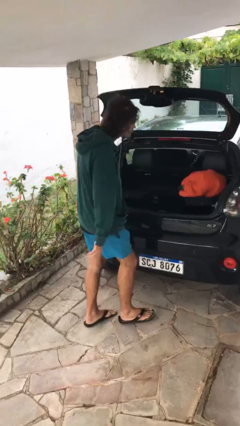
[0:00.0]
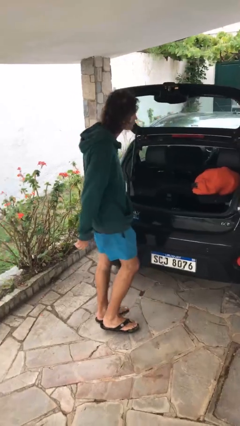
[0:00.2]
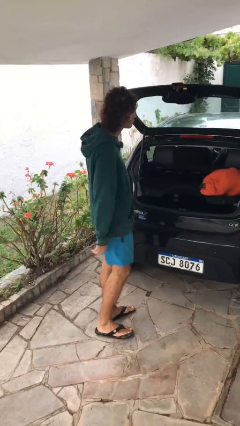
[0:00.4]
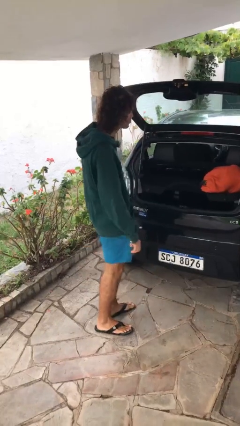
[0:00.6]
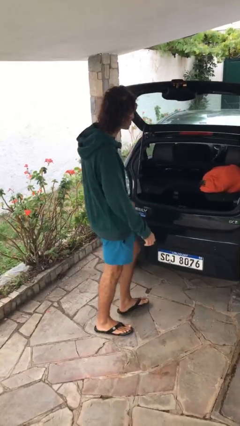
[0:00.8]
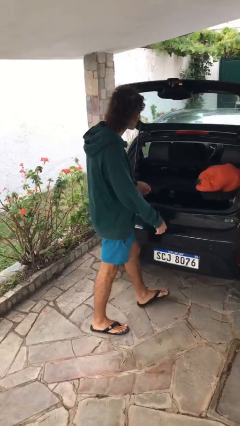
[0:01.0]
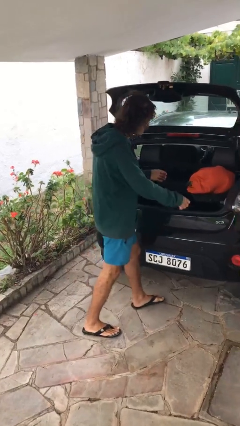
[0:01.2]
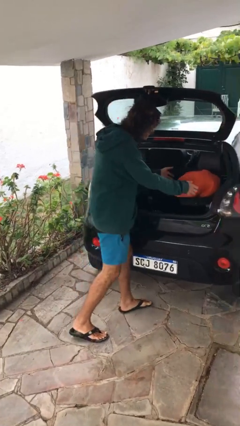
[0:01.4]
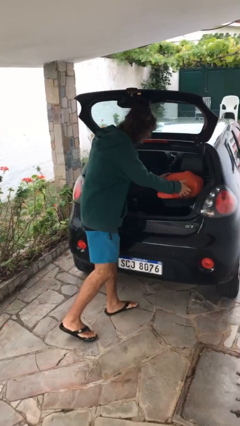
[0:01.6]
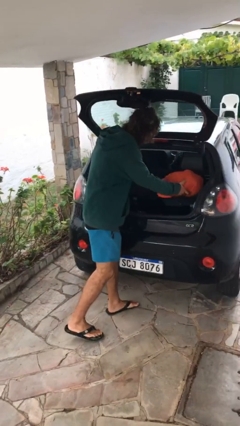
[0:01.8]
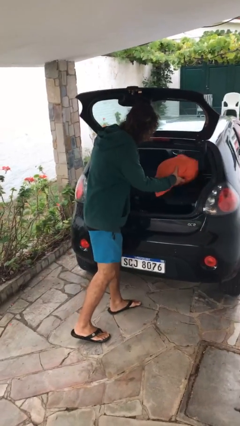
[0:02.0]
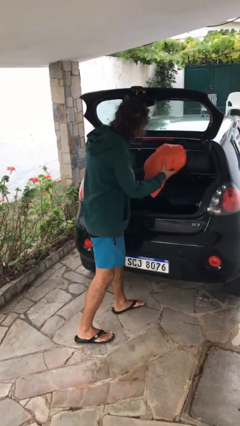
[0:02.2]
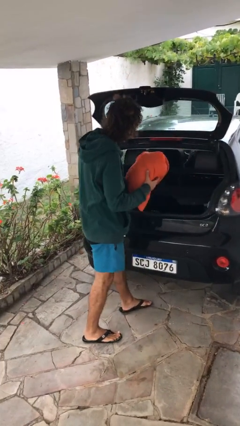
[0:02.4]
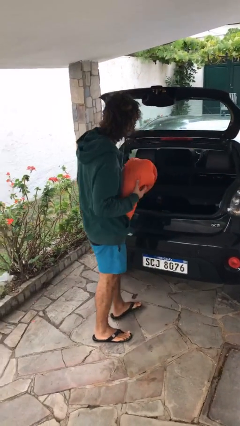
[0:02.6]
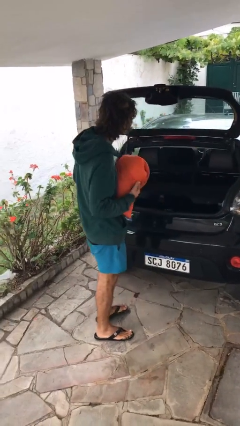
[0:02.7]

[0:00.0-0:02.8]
person unloads car

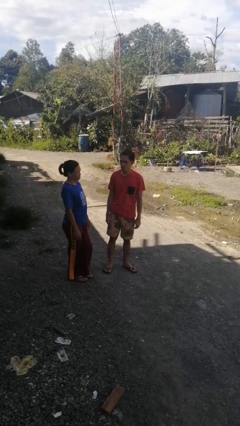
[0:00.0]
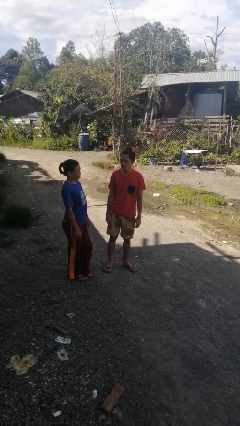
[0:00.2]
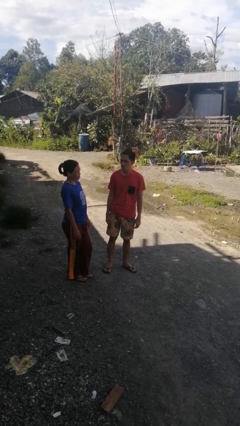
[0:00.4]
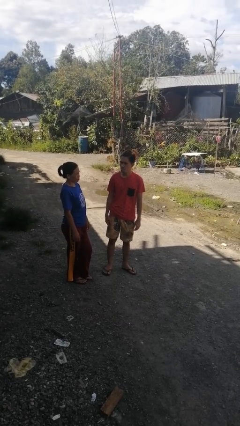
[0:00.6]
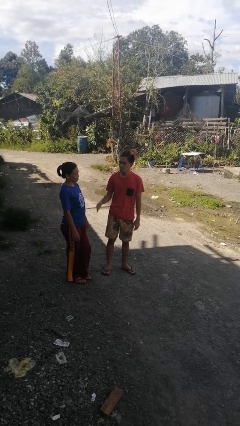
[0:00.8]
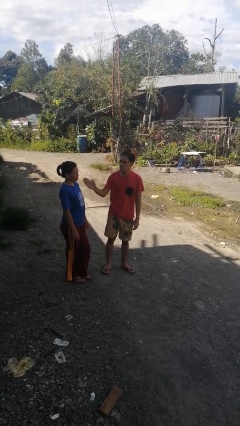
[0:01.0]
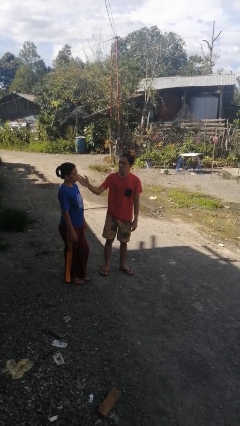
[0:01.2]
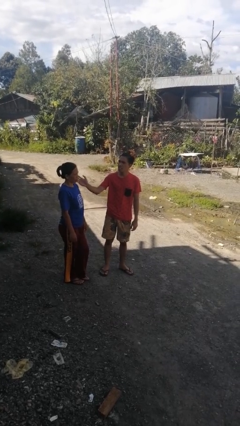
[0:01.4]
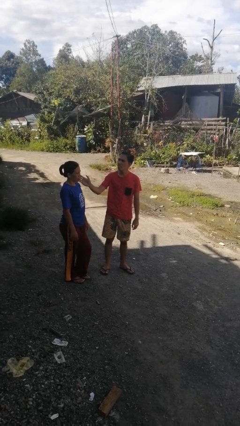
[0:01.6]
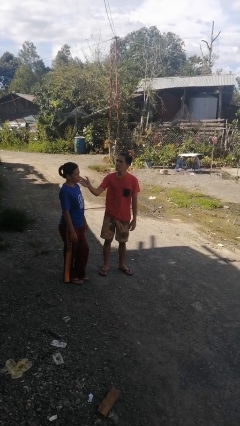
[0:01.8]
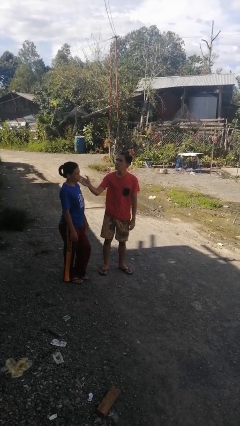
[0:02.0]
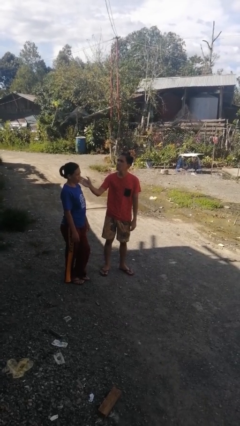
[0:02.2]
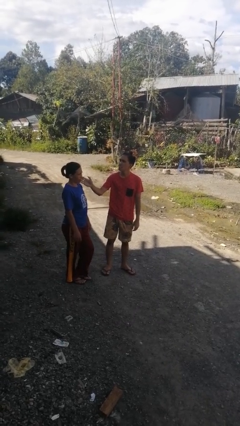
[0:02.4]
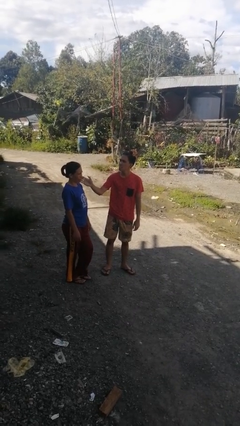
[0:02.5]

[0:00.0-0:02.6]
person touches face of person

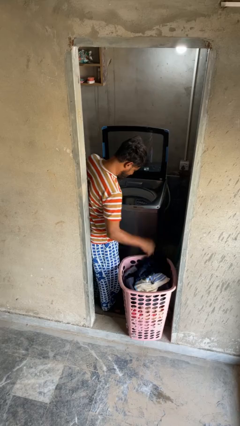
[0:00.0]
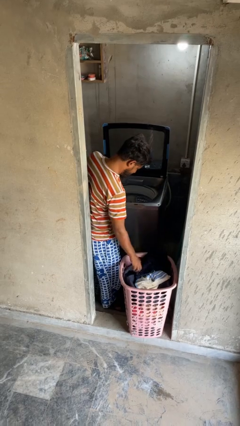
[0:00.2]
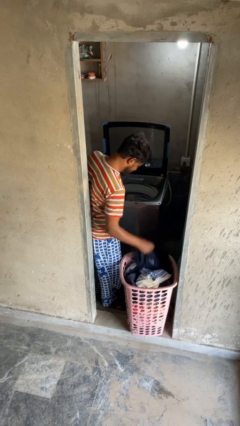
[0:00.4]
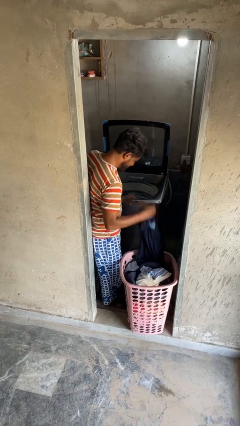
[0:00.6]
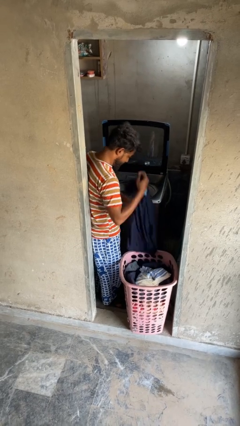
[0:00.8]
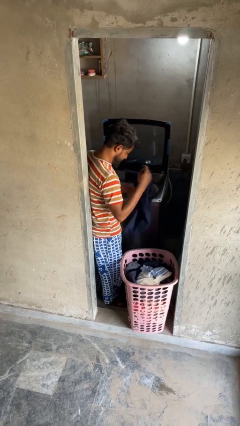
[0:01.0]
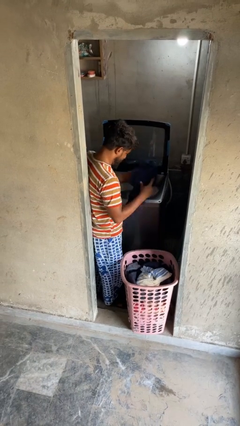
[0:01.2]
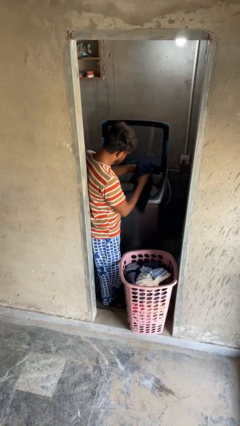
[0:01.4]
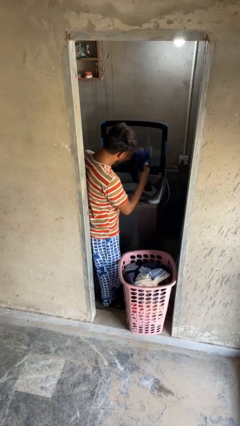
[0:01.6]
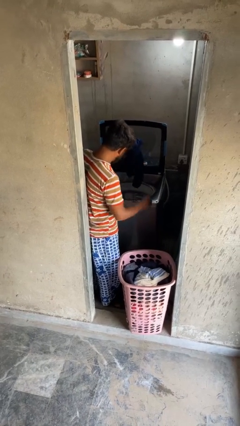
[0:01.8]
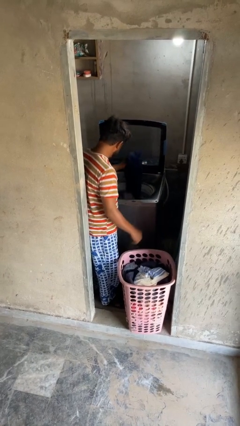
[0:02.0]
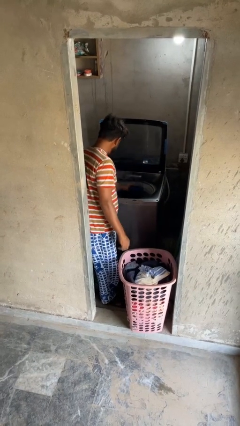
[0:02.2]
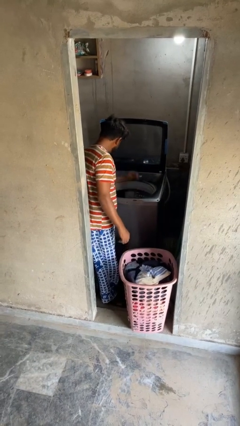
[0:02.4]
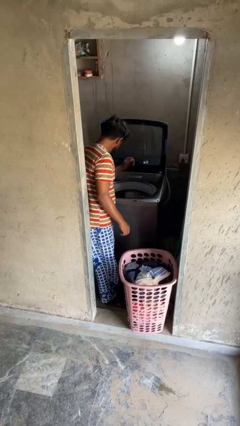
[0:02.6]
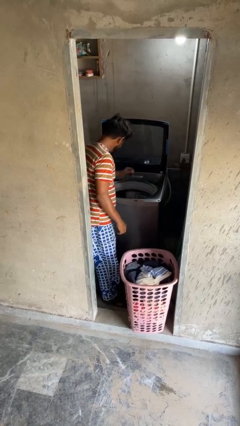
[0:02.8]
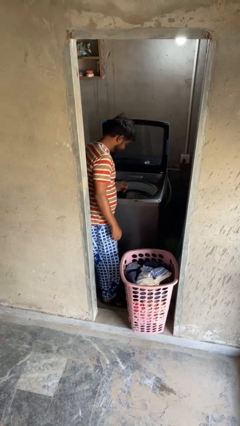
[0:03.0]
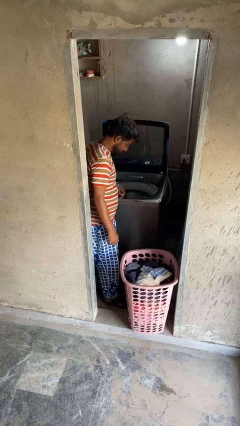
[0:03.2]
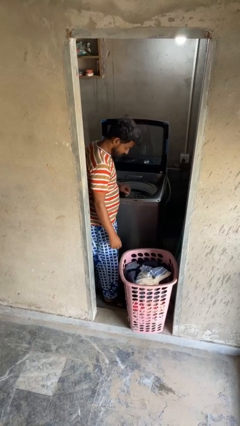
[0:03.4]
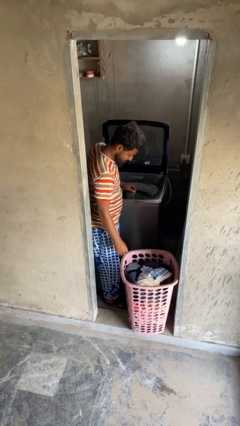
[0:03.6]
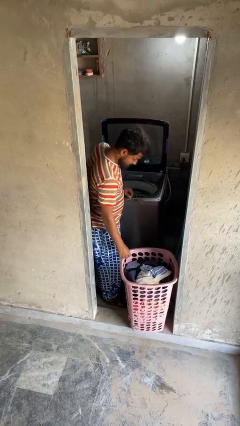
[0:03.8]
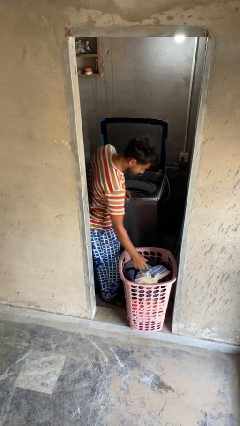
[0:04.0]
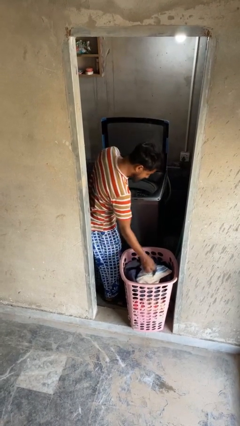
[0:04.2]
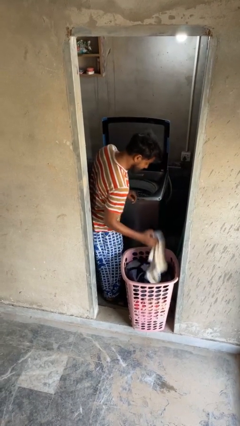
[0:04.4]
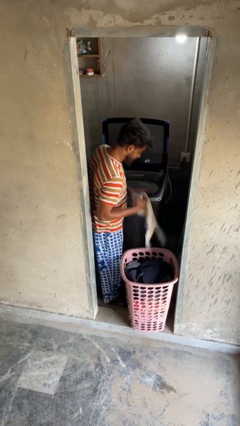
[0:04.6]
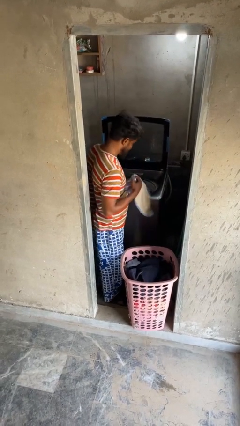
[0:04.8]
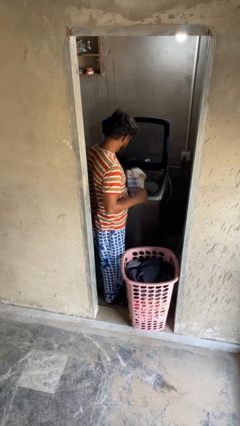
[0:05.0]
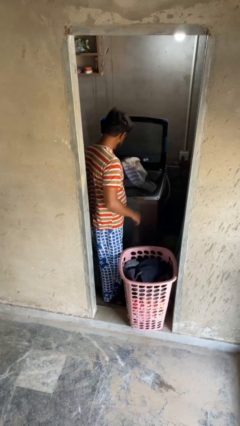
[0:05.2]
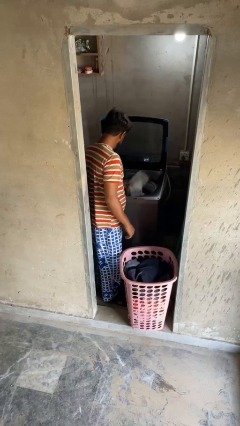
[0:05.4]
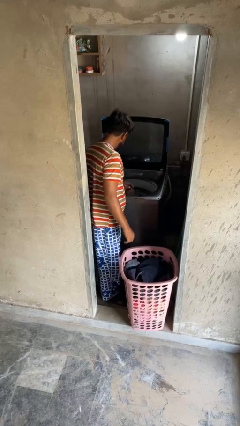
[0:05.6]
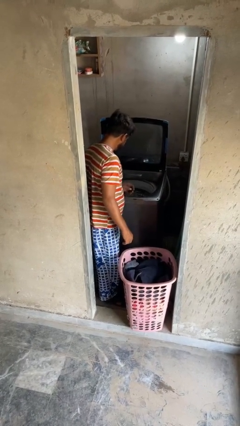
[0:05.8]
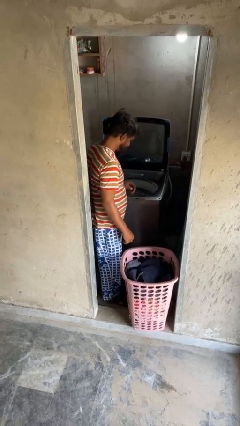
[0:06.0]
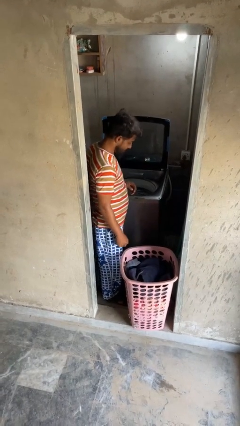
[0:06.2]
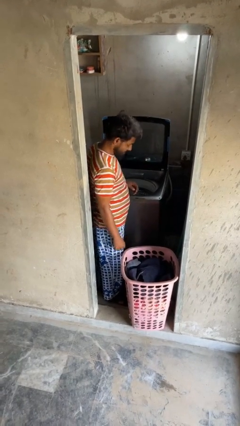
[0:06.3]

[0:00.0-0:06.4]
person loads dishwasher

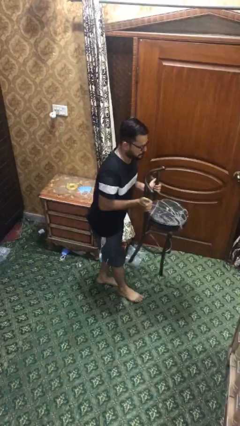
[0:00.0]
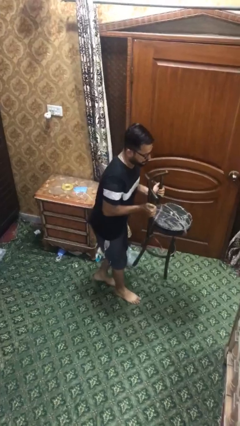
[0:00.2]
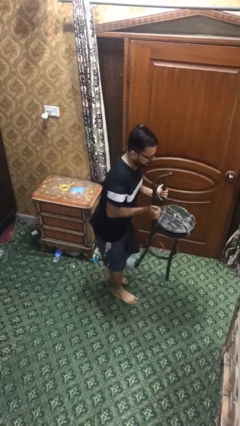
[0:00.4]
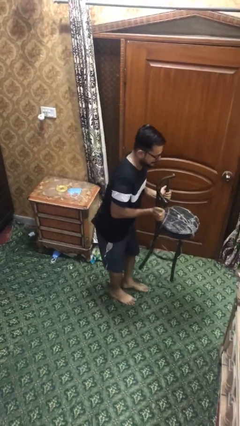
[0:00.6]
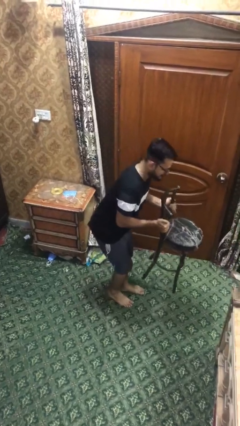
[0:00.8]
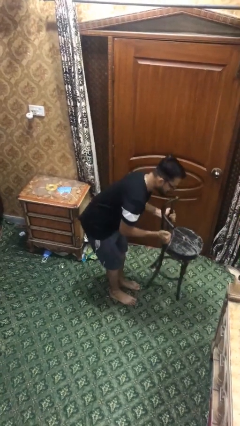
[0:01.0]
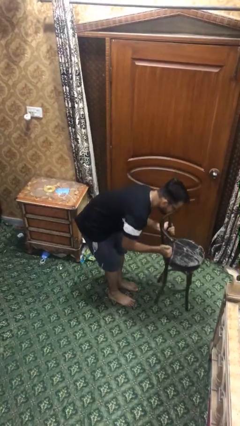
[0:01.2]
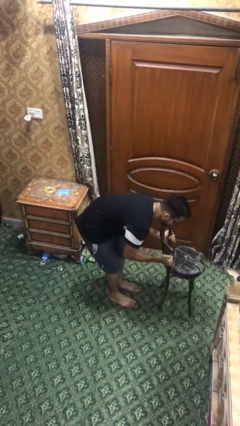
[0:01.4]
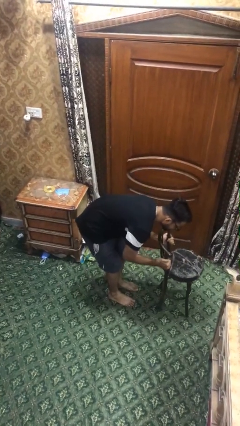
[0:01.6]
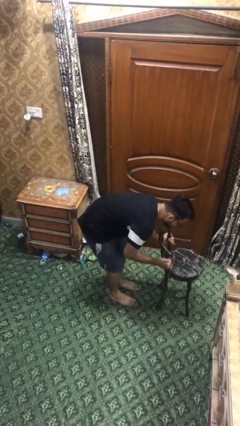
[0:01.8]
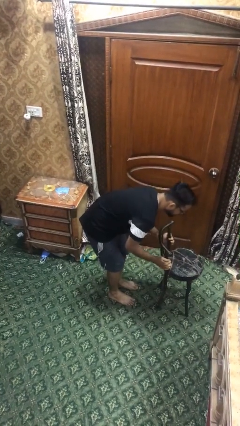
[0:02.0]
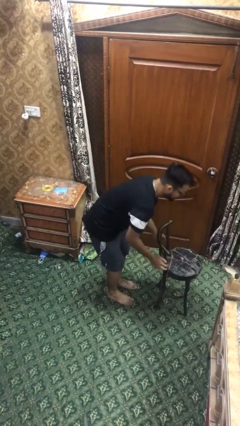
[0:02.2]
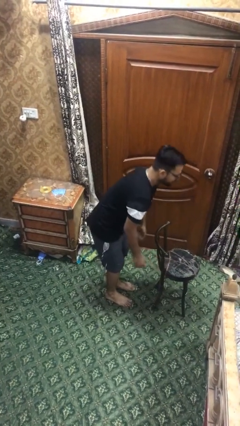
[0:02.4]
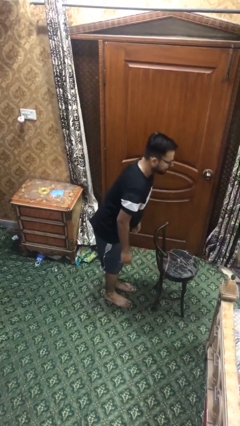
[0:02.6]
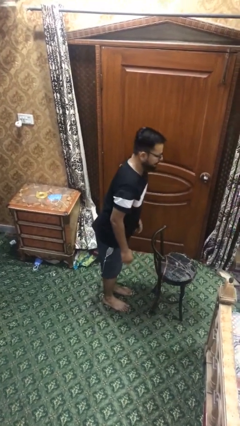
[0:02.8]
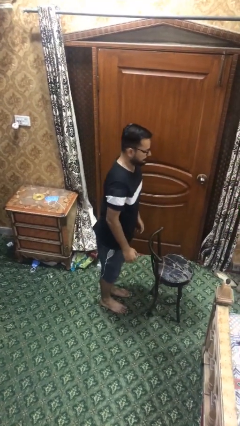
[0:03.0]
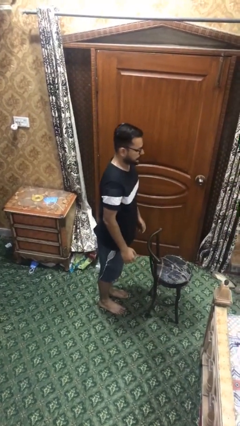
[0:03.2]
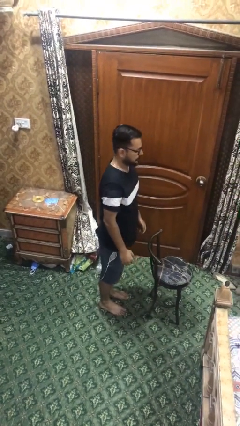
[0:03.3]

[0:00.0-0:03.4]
person puts down object on floor

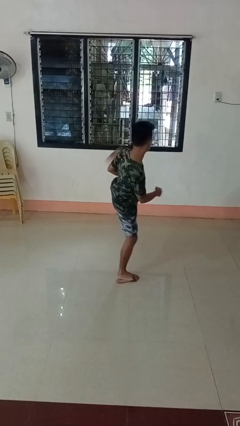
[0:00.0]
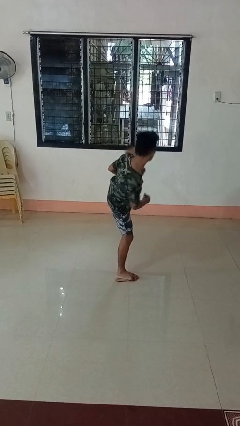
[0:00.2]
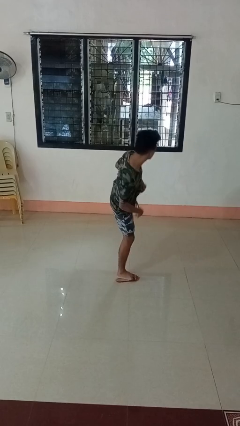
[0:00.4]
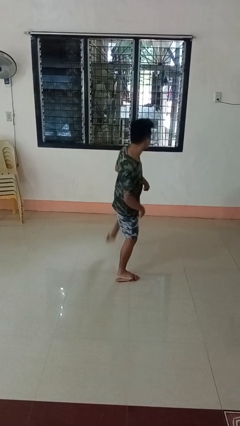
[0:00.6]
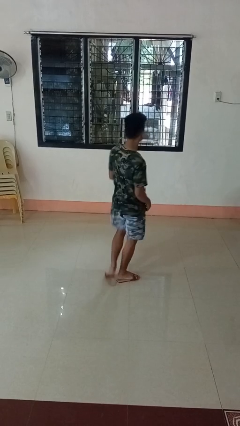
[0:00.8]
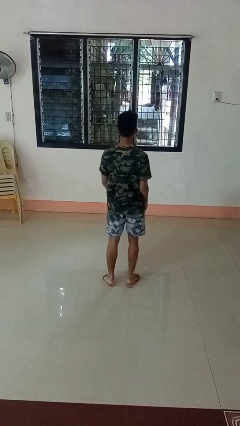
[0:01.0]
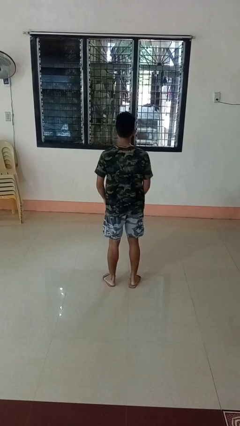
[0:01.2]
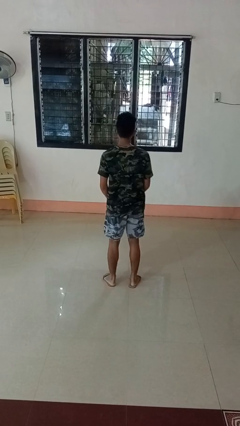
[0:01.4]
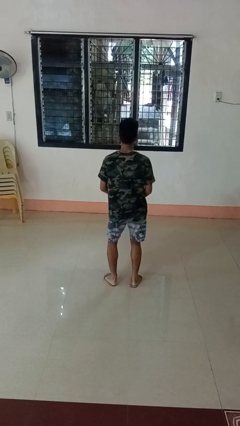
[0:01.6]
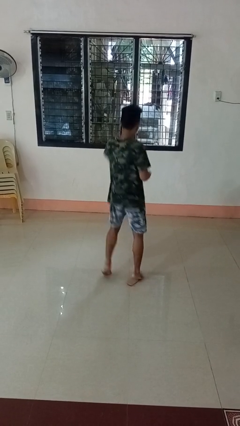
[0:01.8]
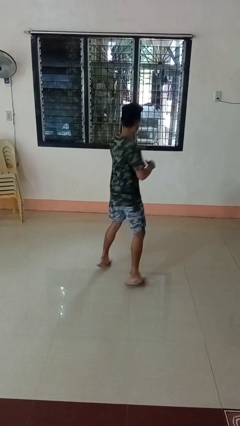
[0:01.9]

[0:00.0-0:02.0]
person karate kicks

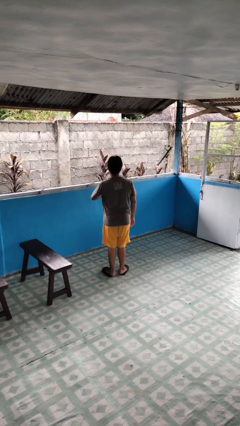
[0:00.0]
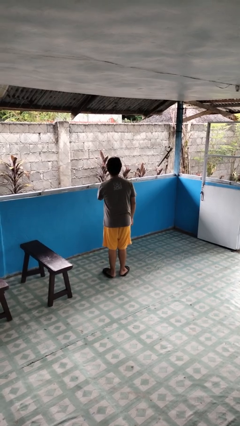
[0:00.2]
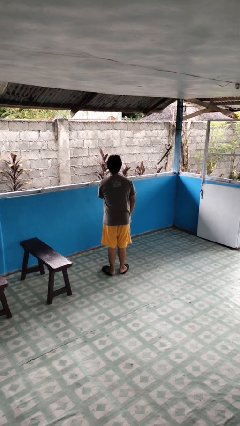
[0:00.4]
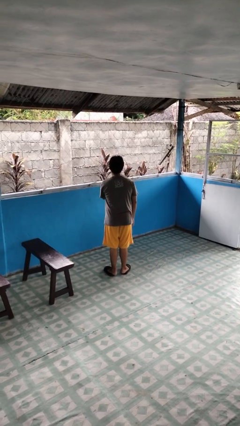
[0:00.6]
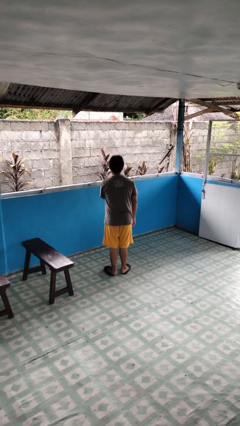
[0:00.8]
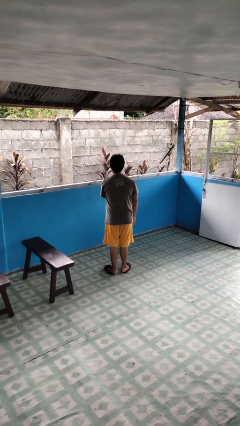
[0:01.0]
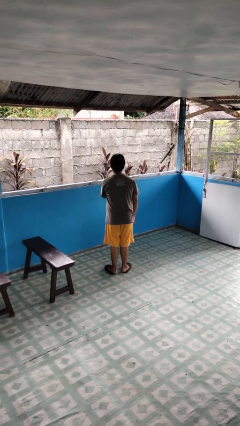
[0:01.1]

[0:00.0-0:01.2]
person gestures be quiet
